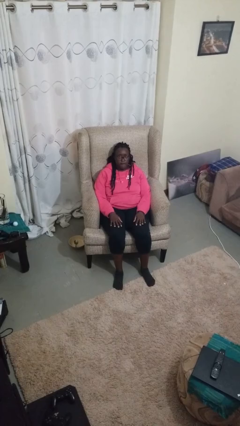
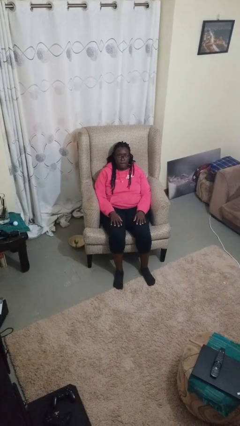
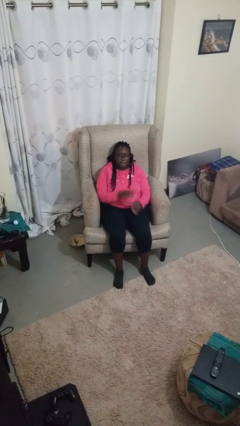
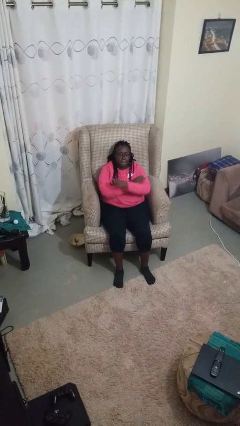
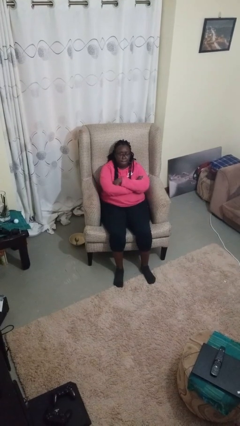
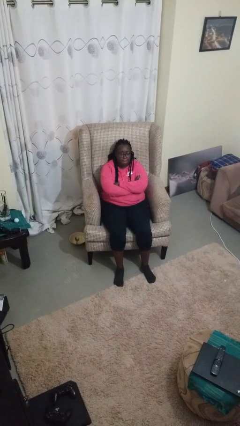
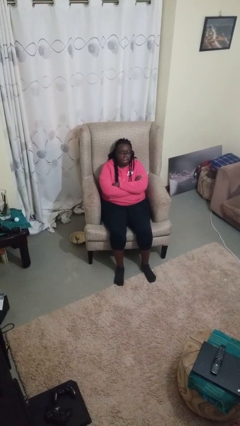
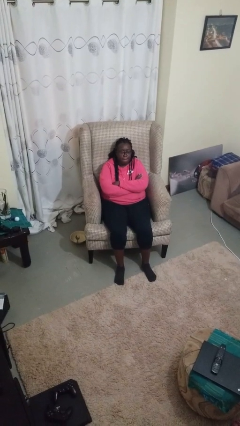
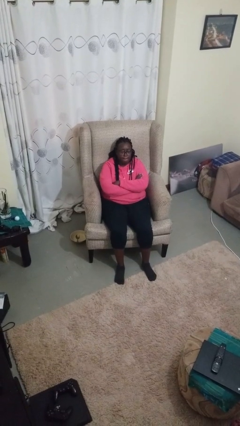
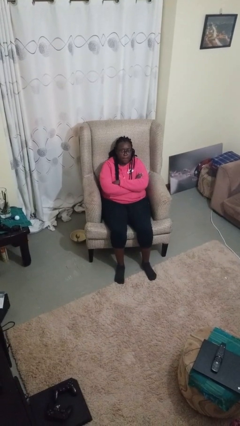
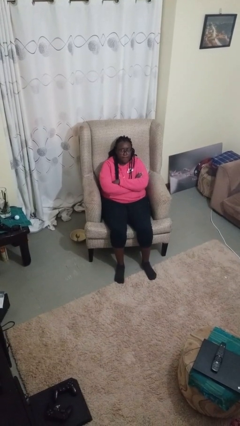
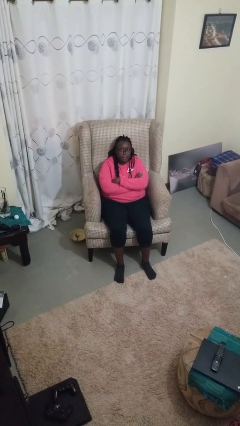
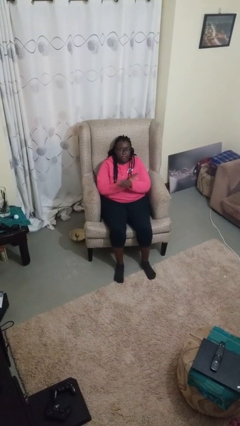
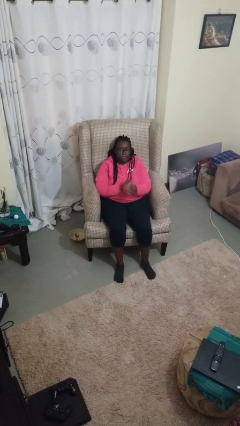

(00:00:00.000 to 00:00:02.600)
person crosses arms

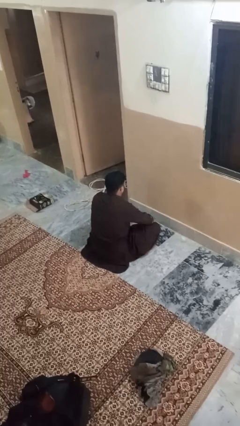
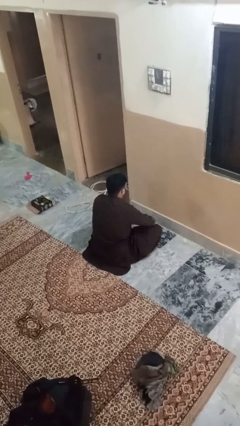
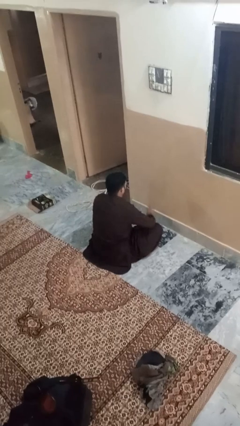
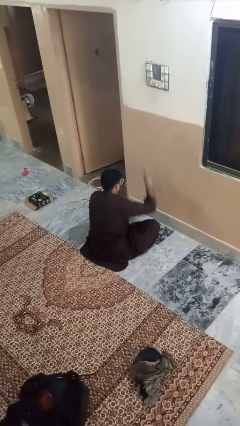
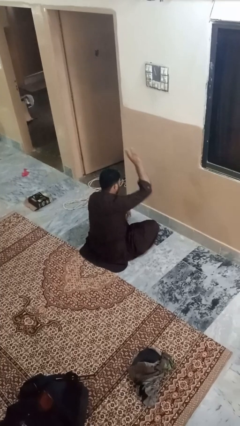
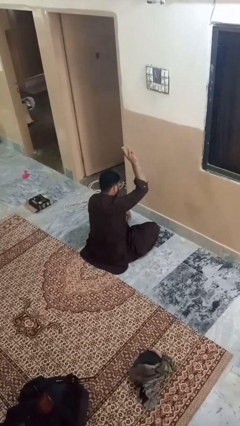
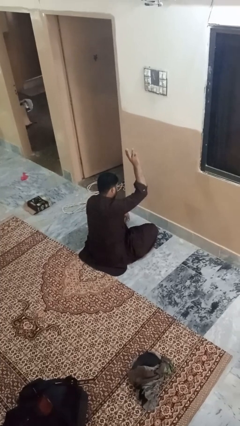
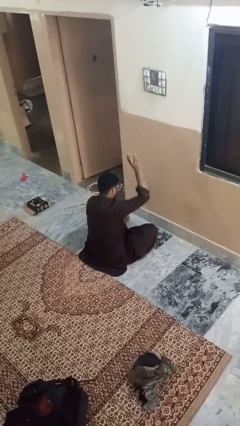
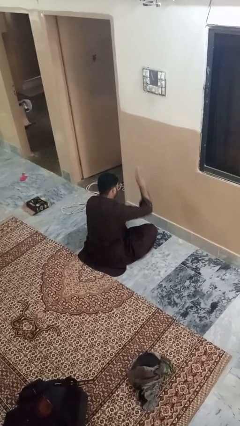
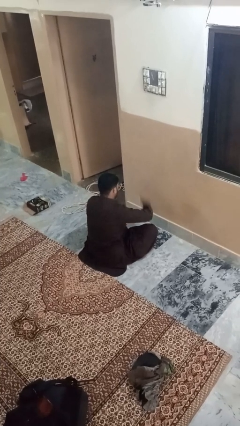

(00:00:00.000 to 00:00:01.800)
person gestures number three

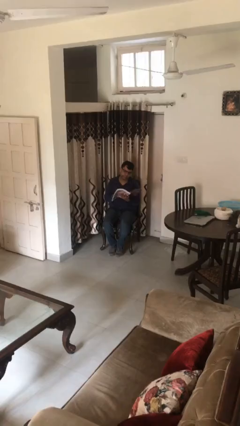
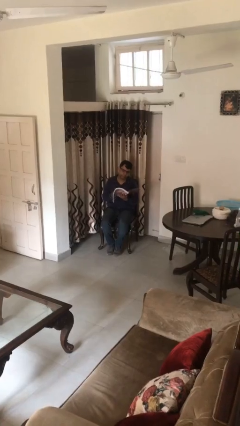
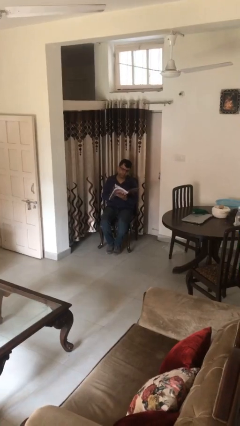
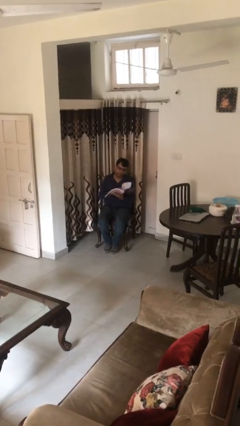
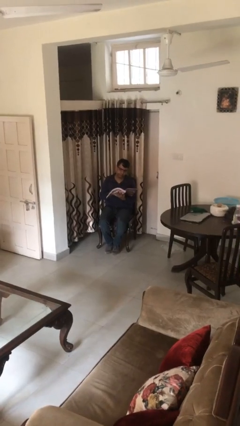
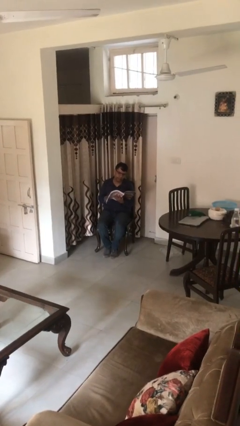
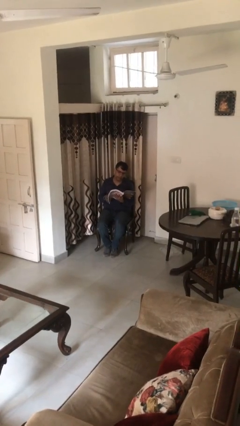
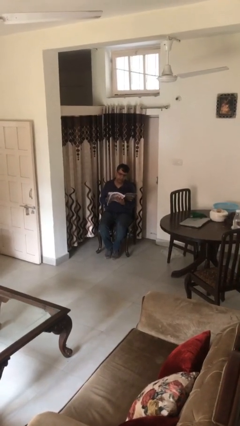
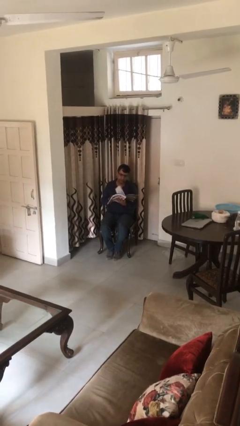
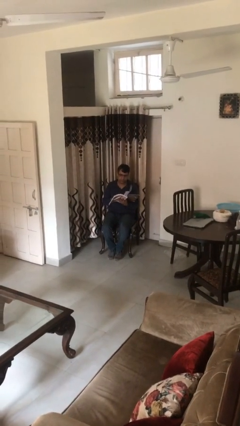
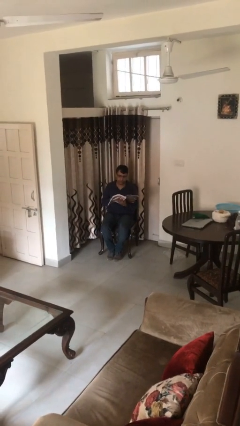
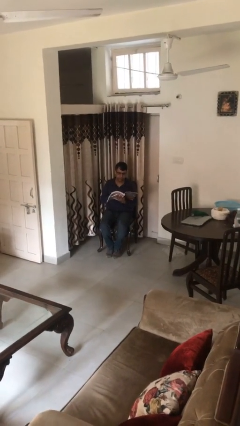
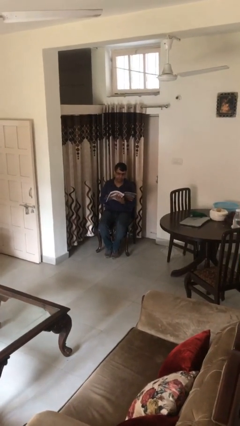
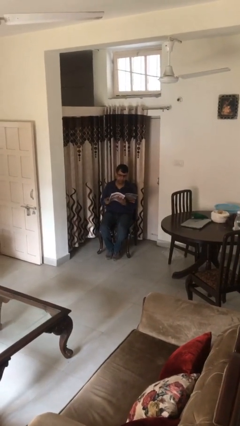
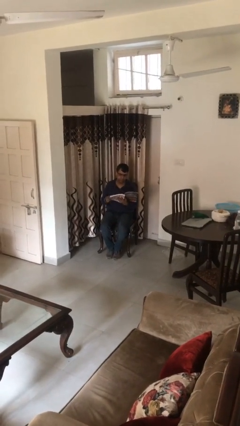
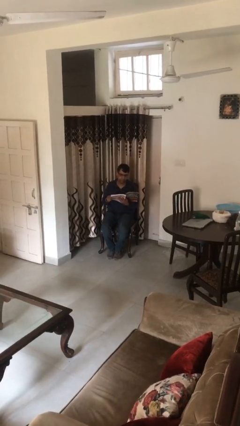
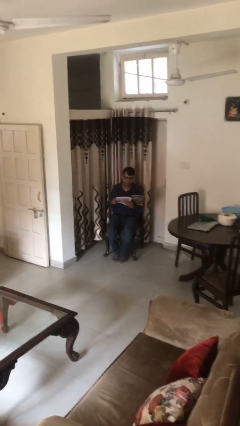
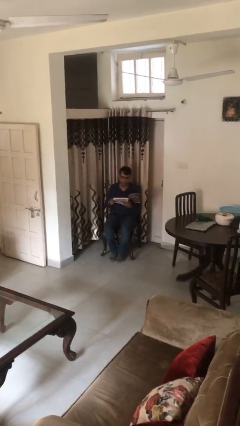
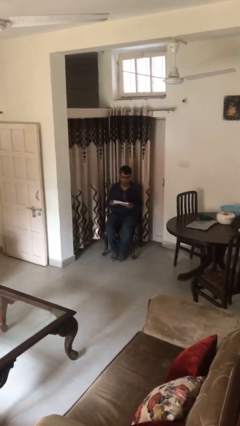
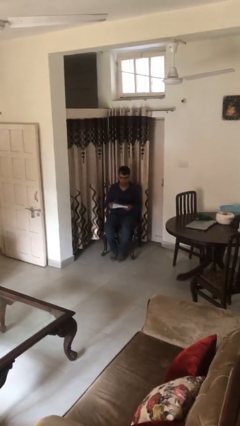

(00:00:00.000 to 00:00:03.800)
person reads document

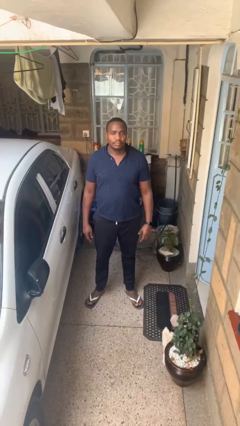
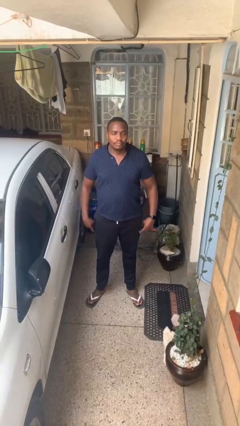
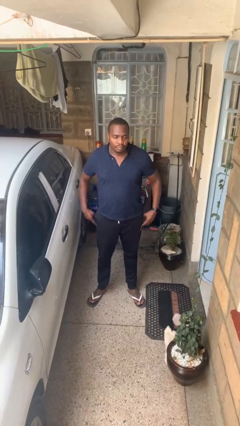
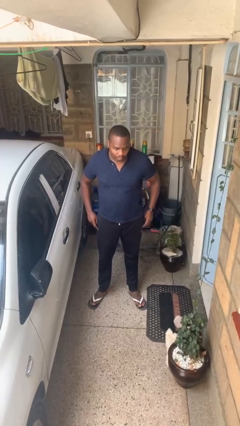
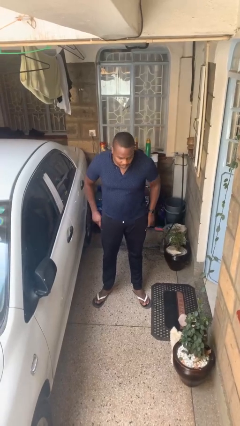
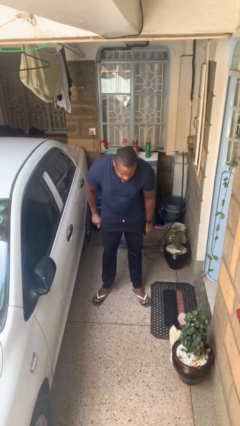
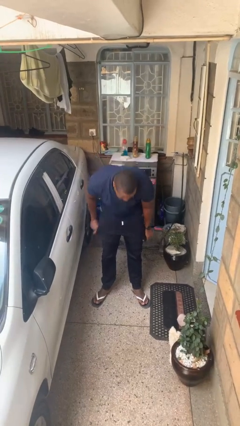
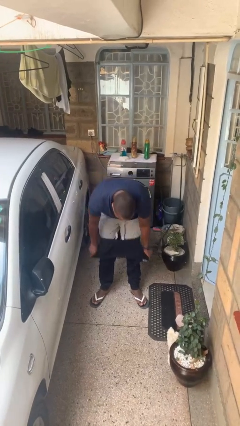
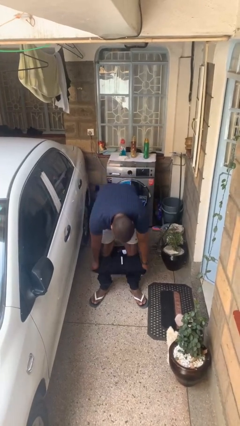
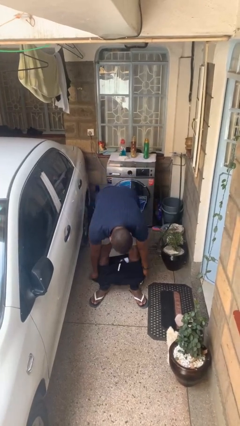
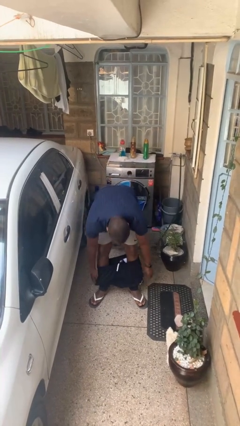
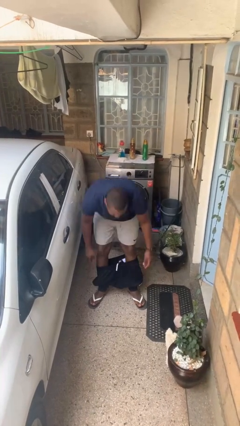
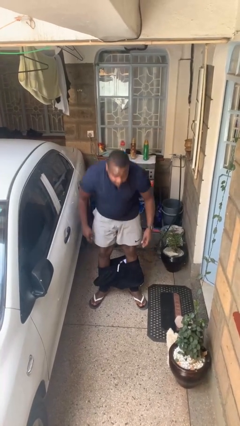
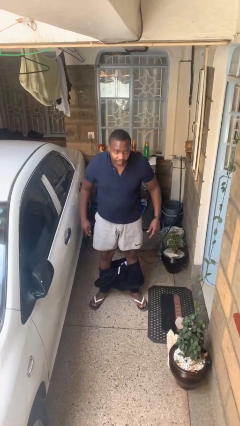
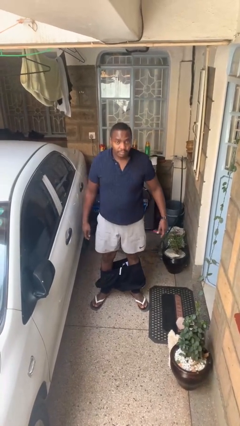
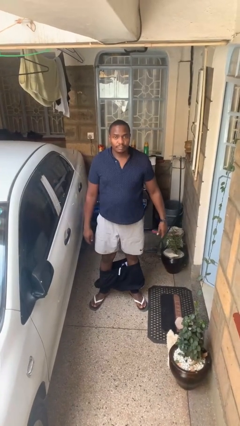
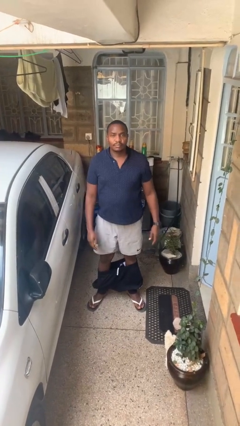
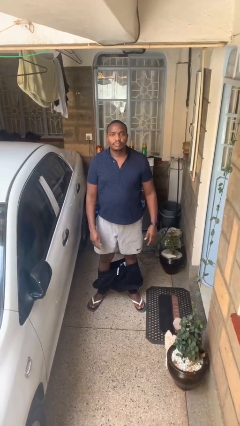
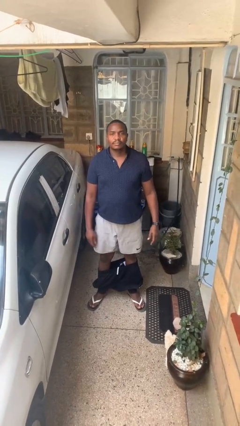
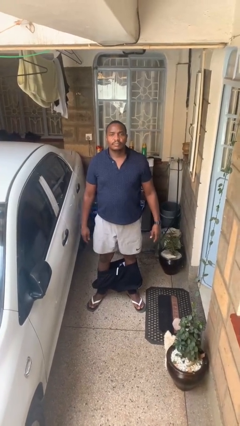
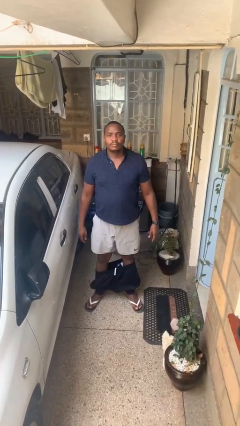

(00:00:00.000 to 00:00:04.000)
person takes off pants

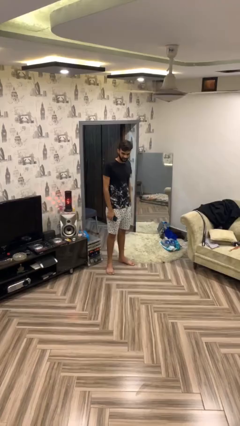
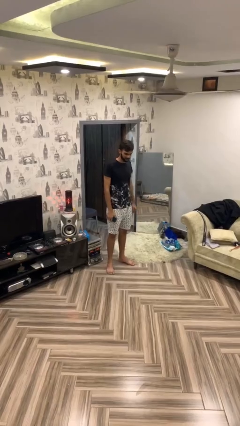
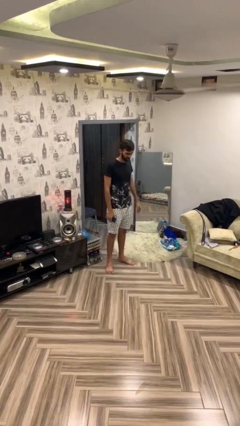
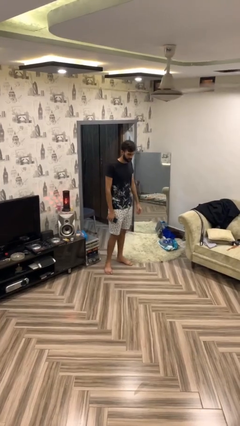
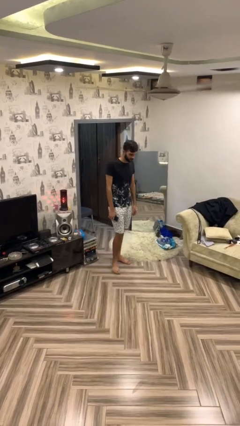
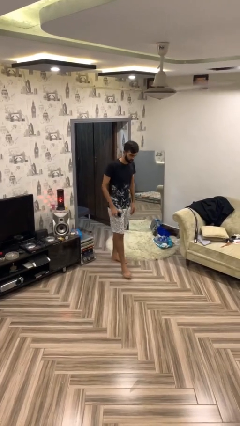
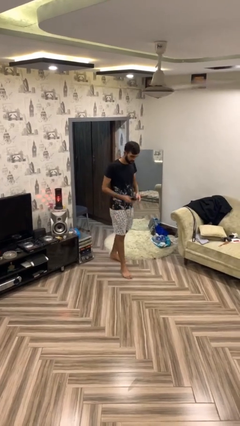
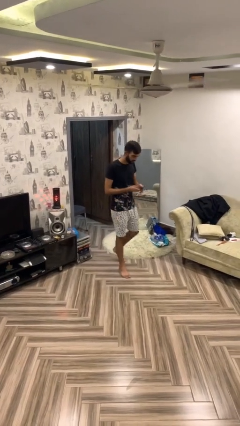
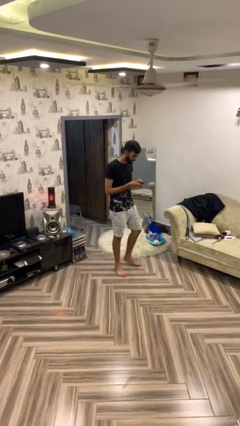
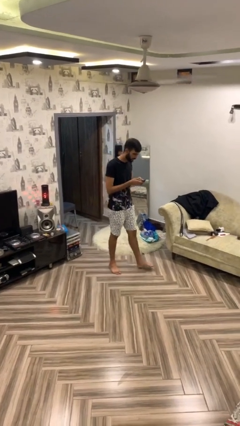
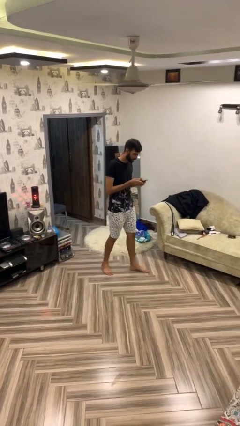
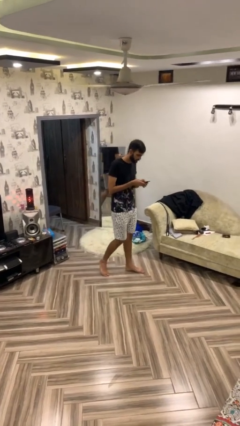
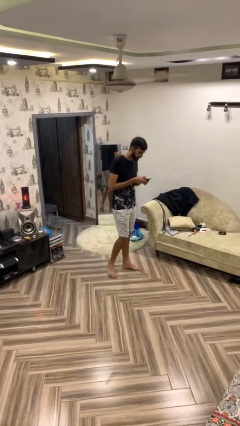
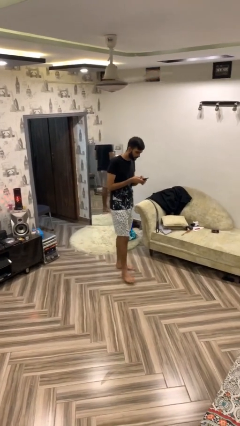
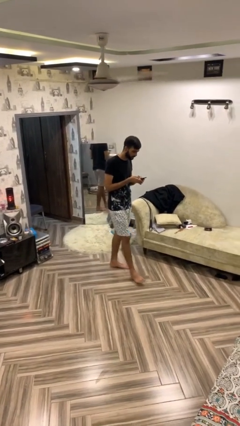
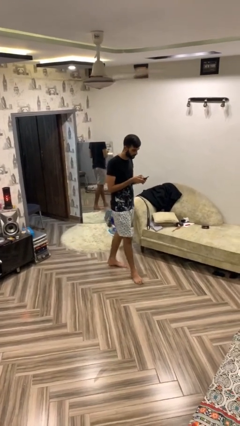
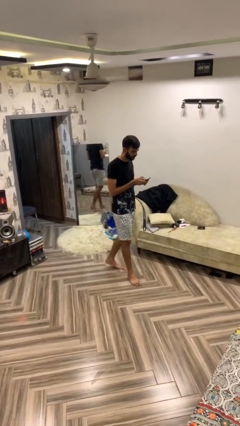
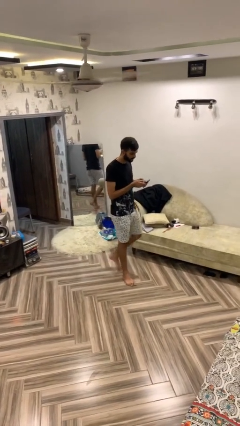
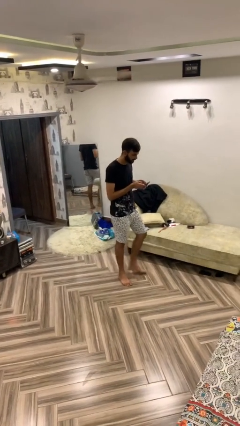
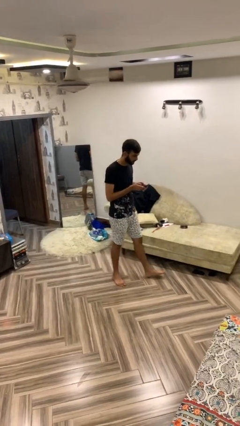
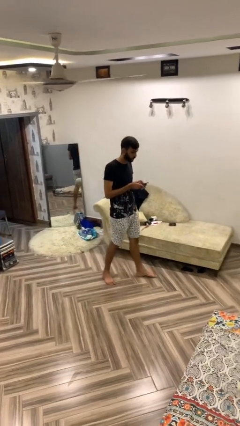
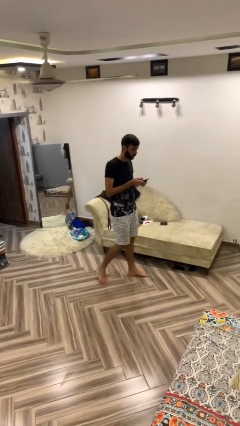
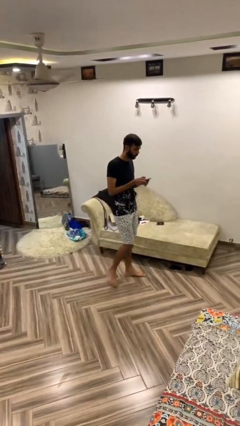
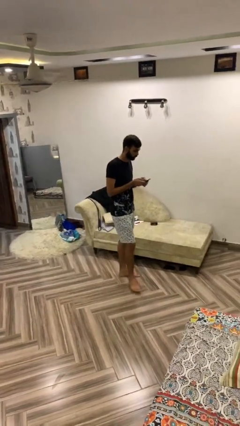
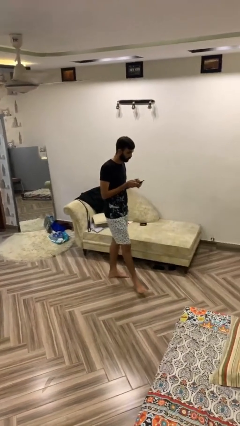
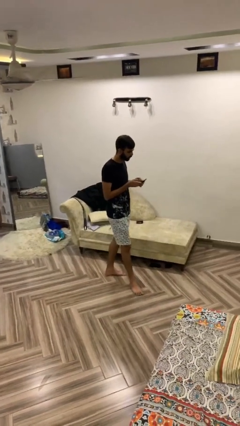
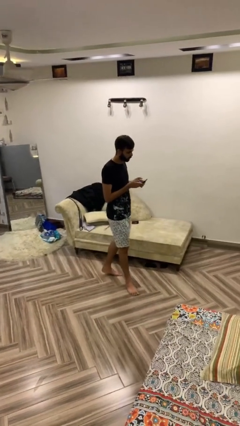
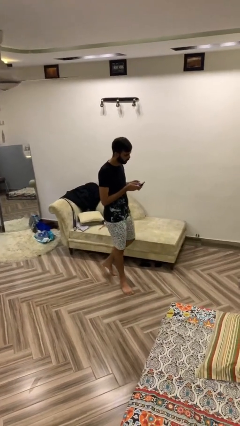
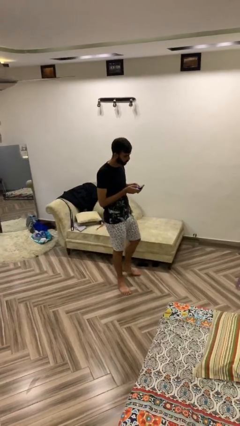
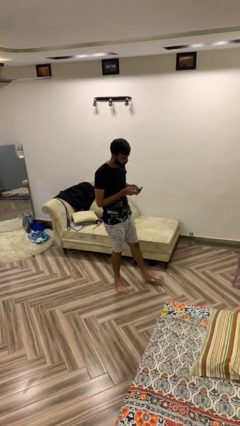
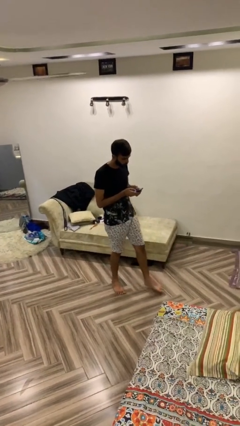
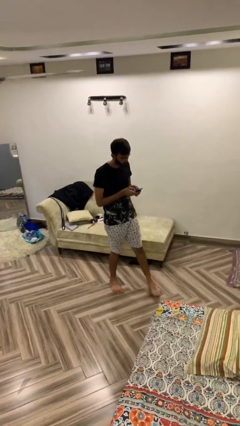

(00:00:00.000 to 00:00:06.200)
person texts on phone
